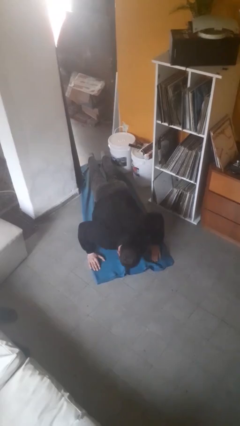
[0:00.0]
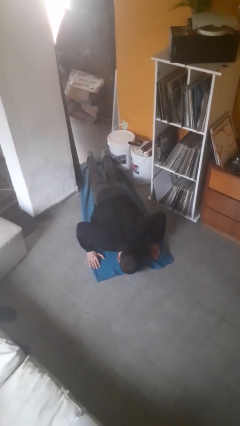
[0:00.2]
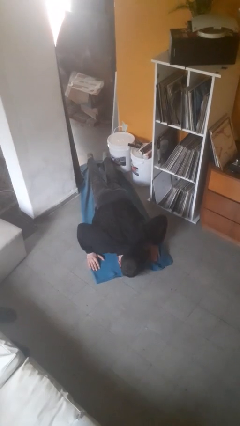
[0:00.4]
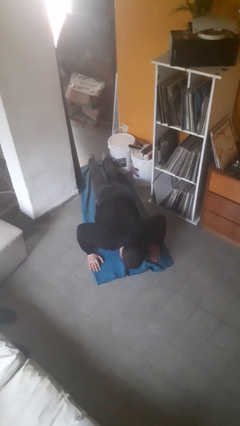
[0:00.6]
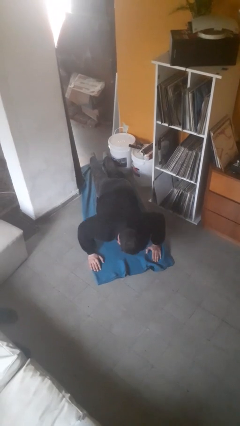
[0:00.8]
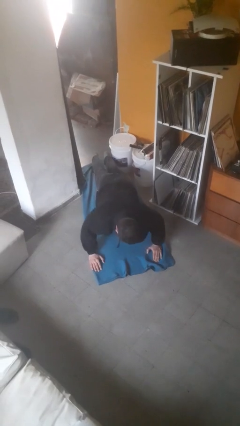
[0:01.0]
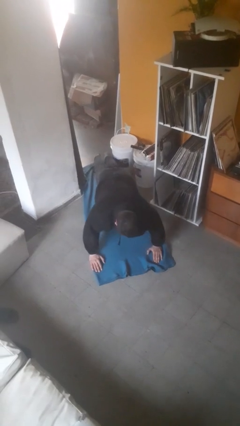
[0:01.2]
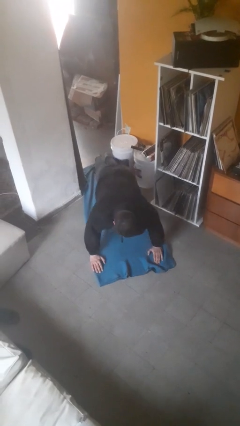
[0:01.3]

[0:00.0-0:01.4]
person exercises with pushup

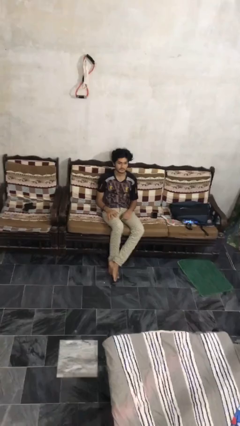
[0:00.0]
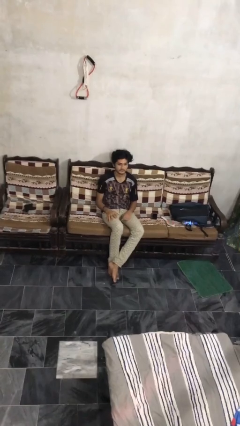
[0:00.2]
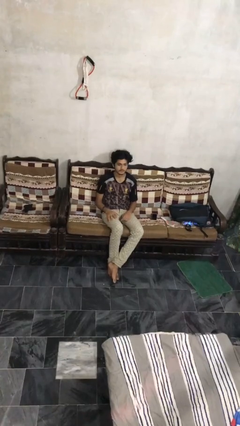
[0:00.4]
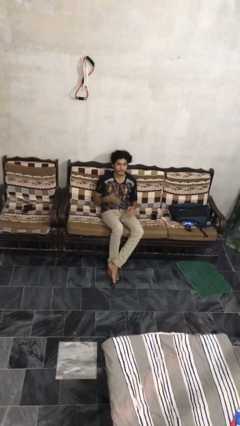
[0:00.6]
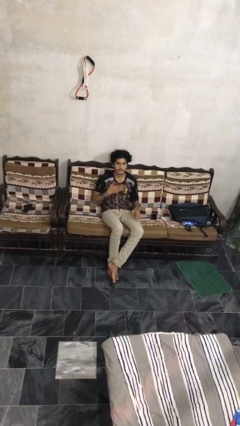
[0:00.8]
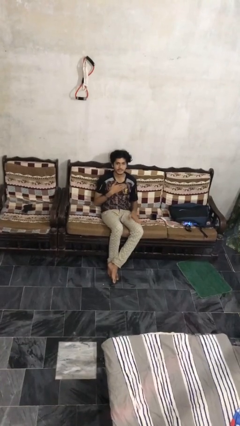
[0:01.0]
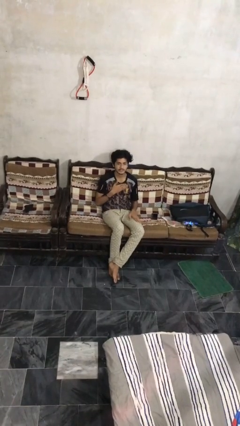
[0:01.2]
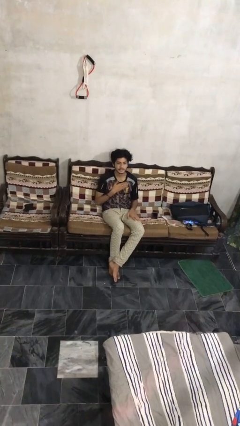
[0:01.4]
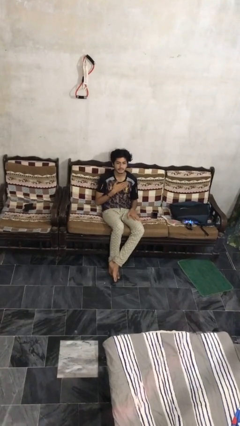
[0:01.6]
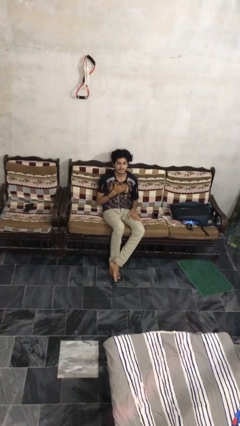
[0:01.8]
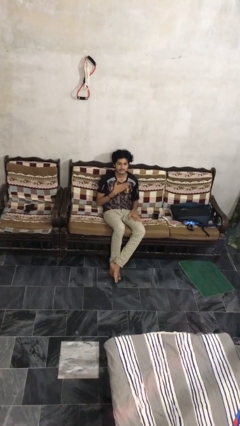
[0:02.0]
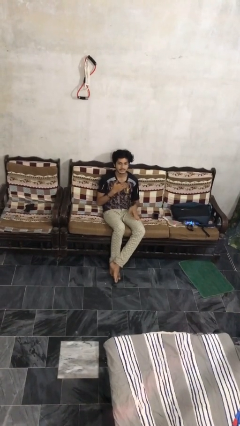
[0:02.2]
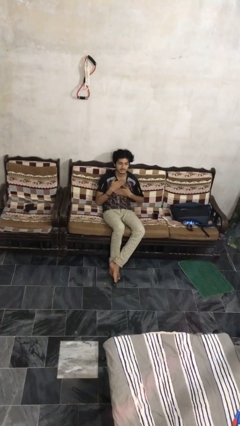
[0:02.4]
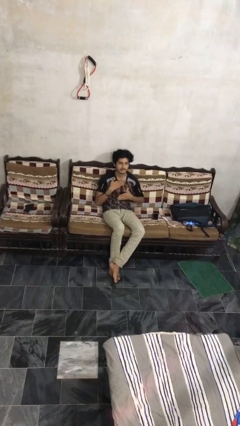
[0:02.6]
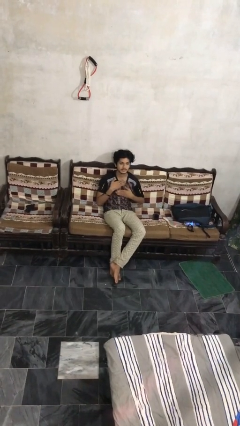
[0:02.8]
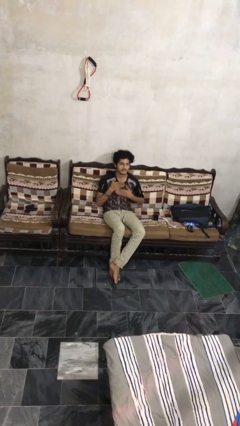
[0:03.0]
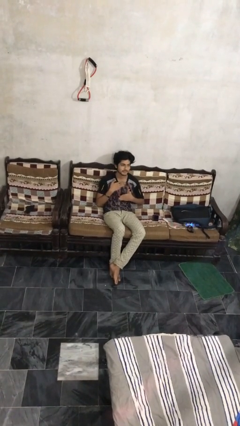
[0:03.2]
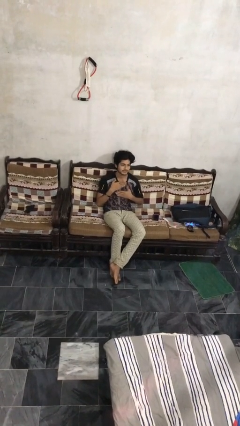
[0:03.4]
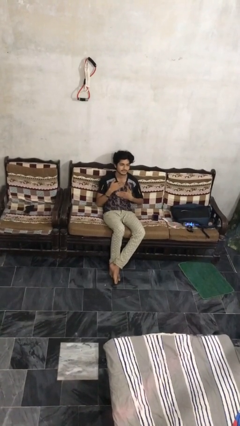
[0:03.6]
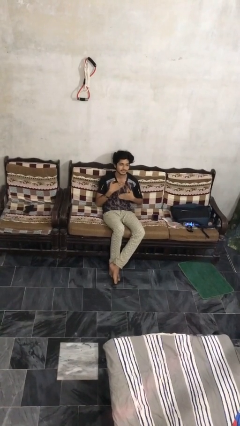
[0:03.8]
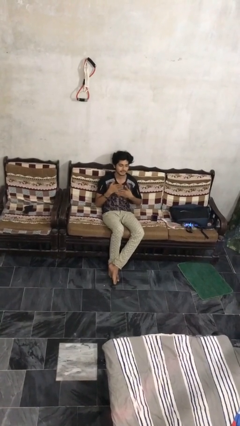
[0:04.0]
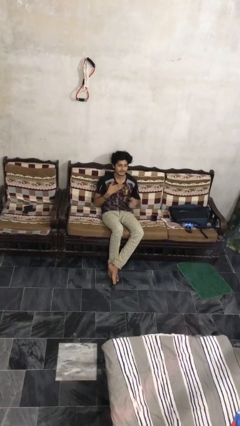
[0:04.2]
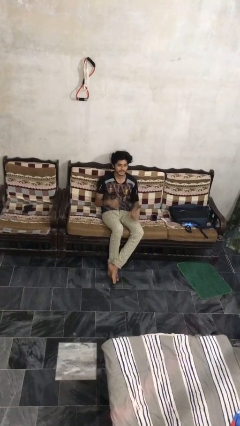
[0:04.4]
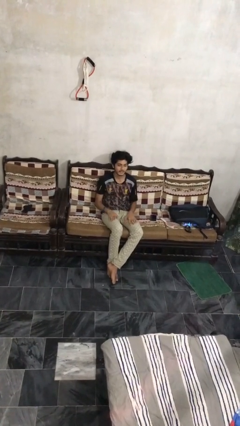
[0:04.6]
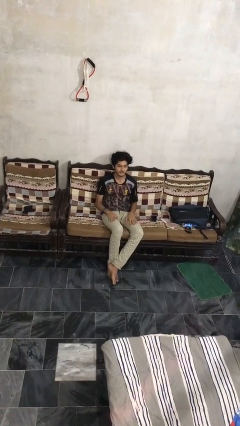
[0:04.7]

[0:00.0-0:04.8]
person drums on chest

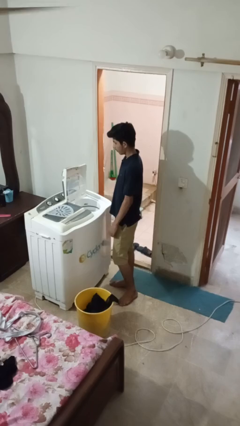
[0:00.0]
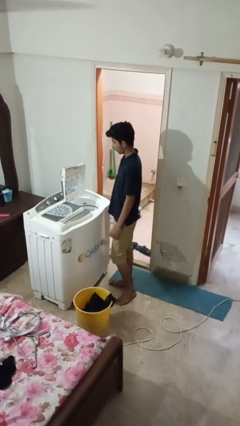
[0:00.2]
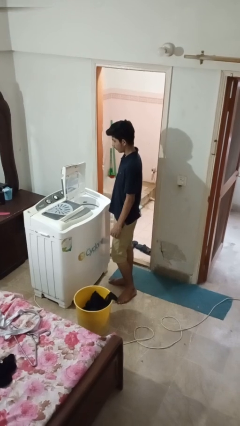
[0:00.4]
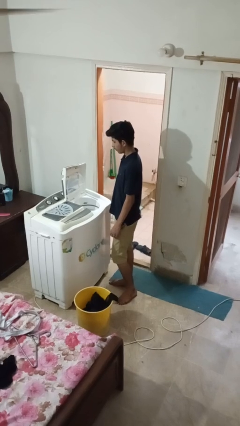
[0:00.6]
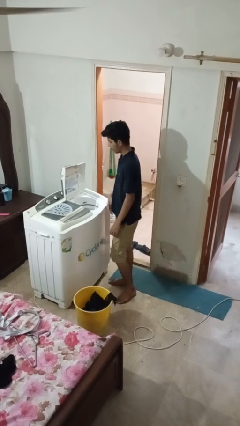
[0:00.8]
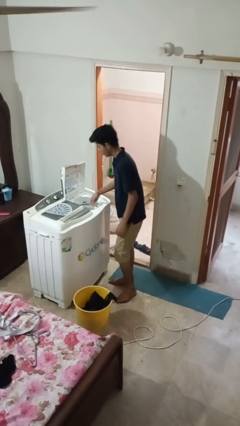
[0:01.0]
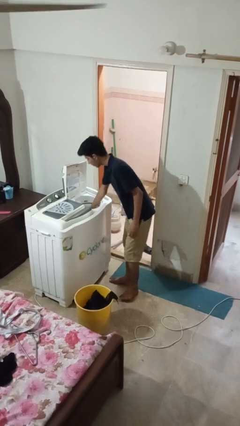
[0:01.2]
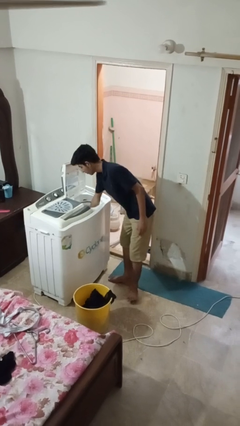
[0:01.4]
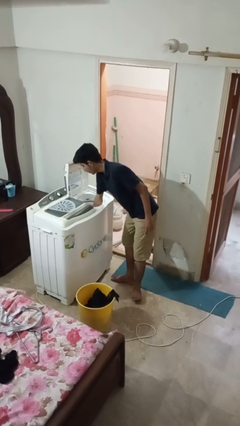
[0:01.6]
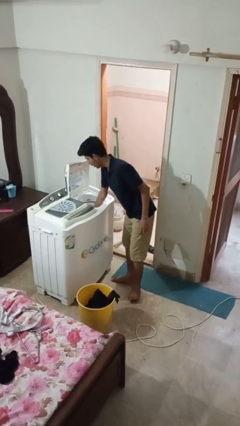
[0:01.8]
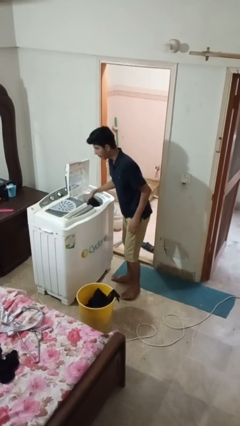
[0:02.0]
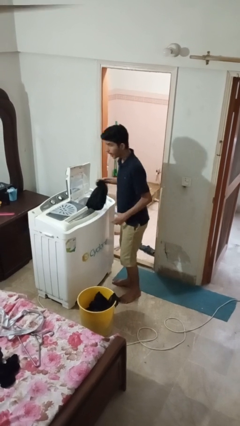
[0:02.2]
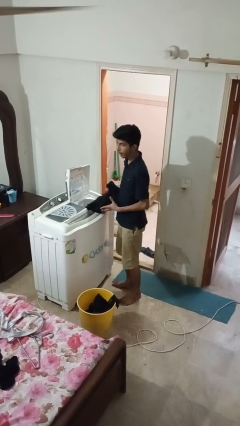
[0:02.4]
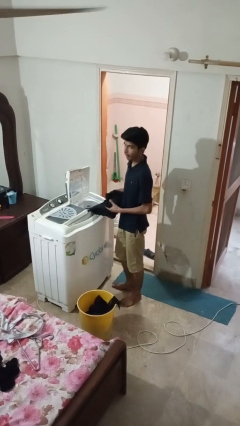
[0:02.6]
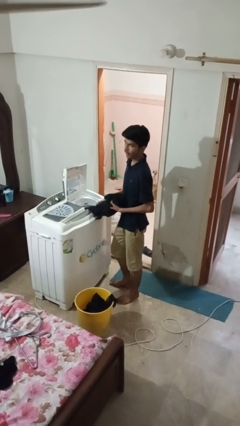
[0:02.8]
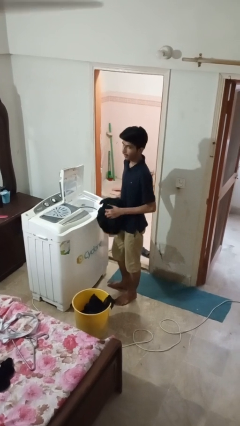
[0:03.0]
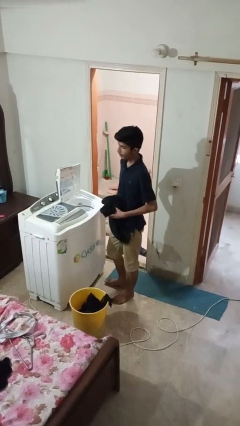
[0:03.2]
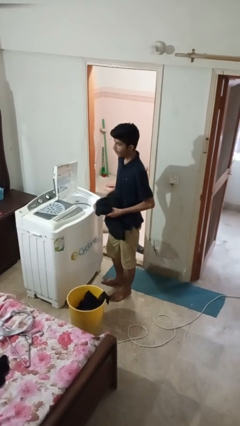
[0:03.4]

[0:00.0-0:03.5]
person unloads dryer

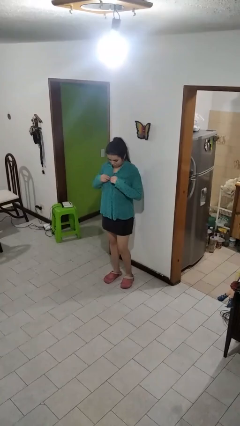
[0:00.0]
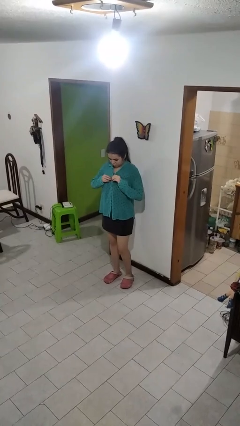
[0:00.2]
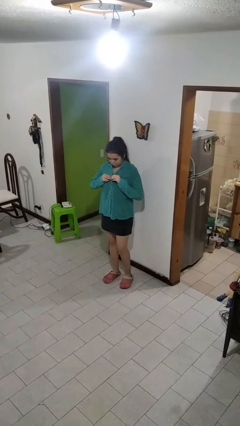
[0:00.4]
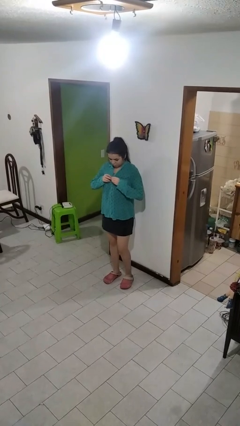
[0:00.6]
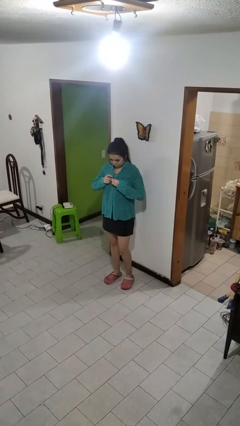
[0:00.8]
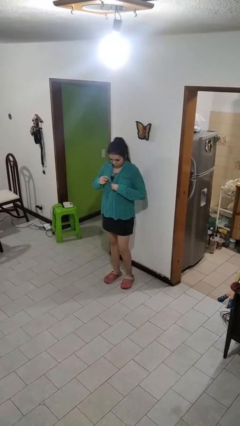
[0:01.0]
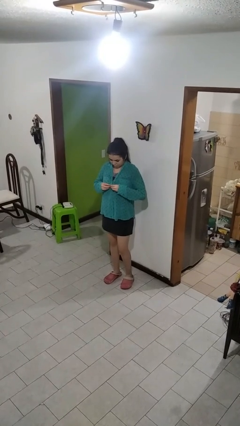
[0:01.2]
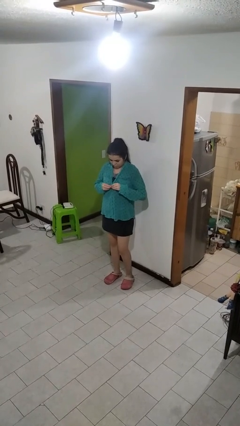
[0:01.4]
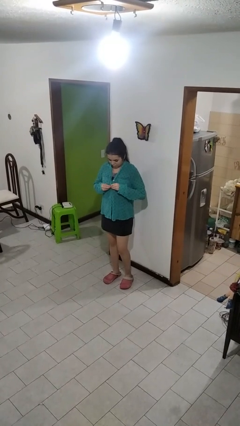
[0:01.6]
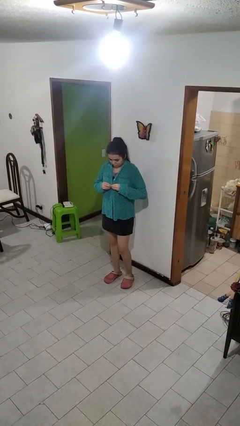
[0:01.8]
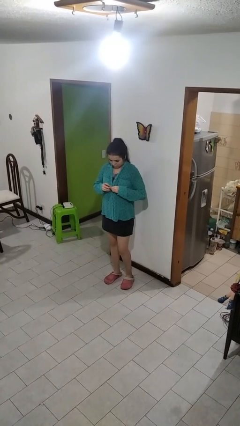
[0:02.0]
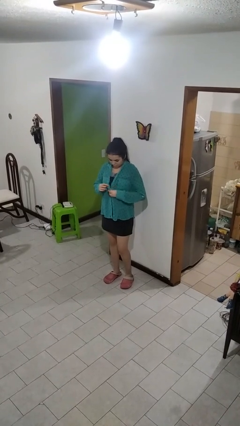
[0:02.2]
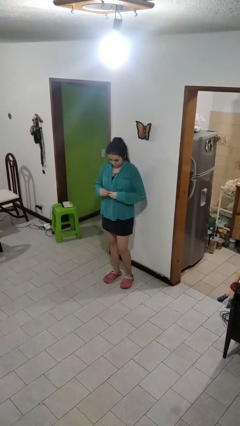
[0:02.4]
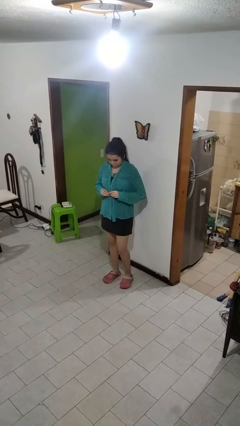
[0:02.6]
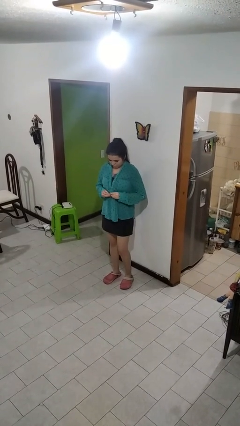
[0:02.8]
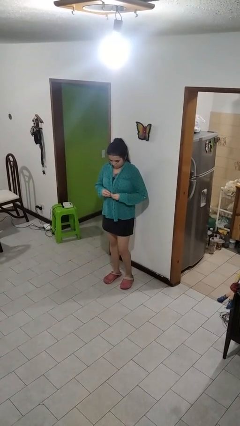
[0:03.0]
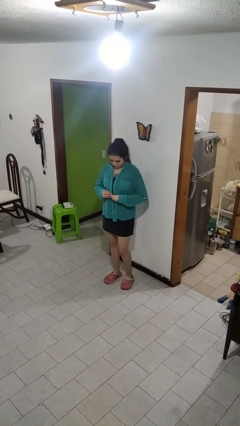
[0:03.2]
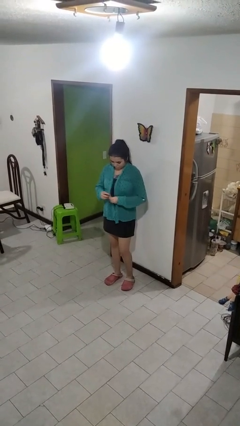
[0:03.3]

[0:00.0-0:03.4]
person unbuttons shirt

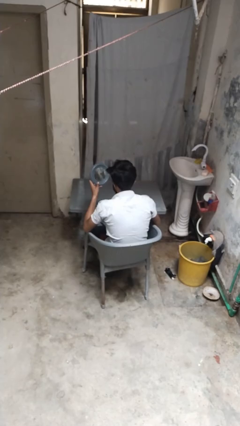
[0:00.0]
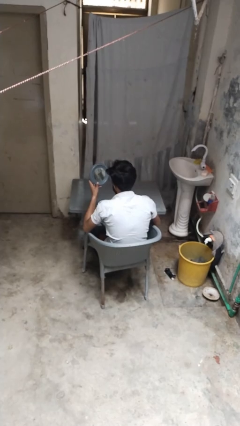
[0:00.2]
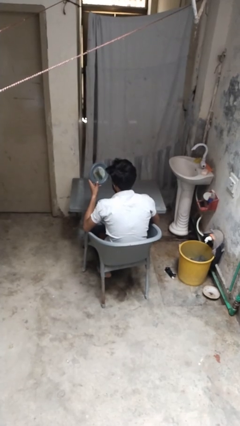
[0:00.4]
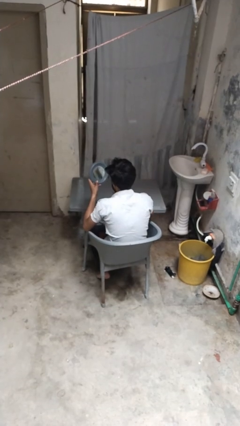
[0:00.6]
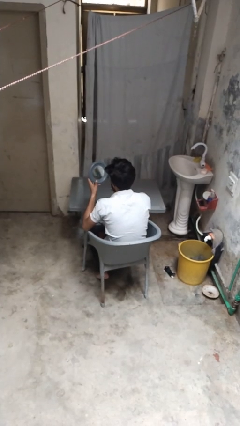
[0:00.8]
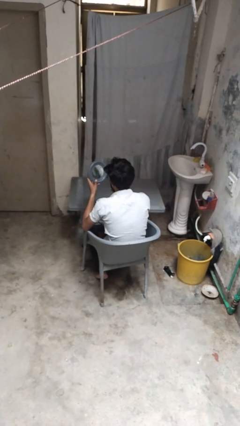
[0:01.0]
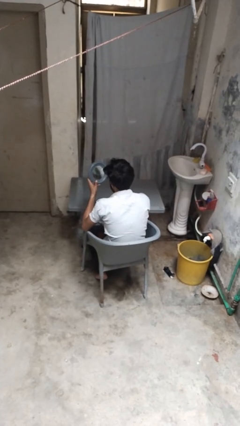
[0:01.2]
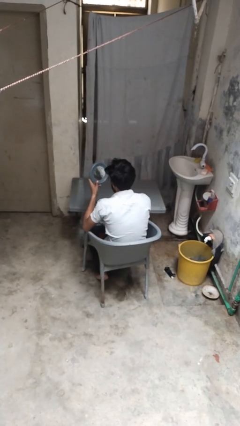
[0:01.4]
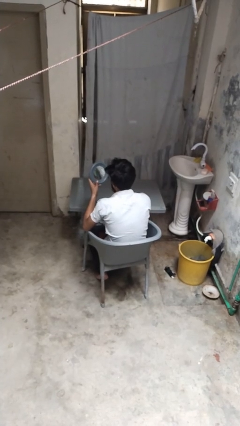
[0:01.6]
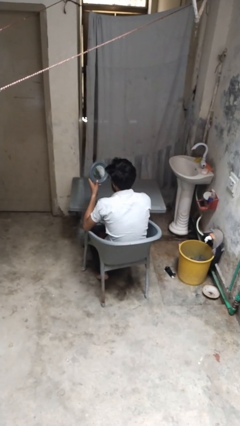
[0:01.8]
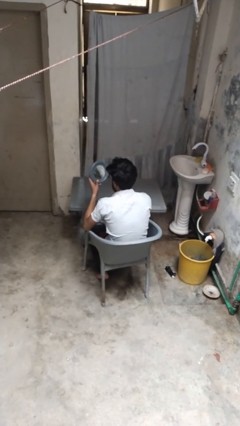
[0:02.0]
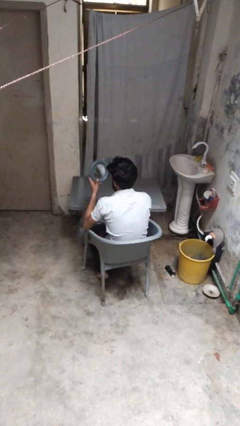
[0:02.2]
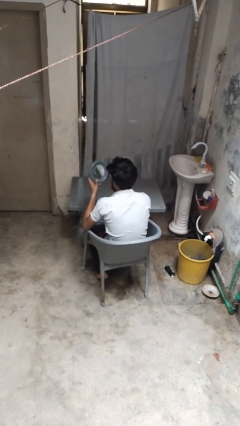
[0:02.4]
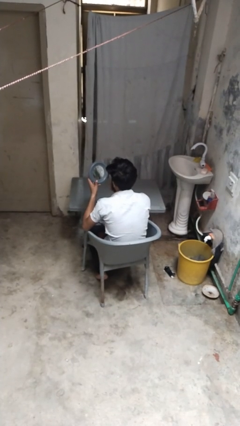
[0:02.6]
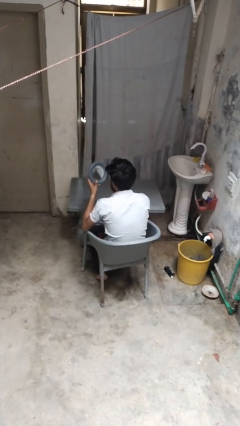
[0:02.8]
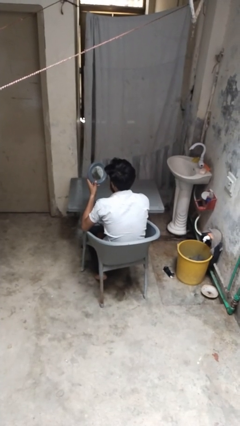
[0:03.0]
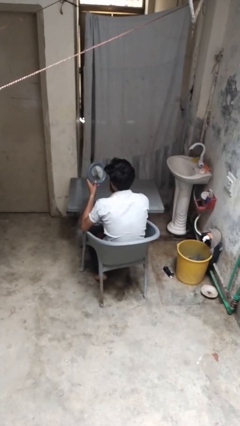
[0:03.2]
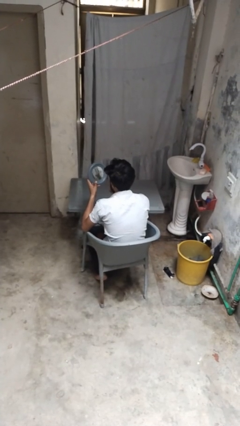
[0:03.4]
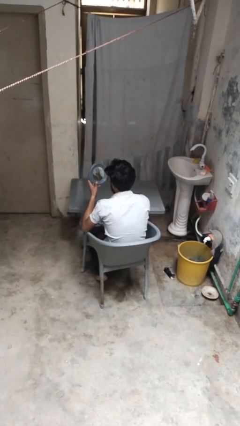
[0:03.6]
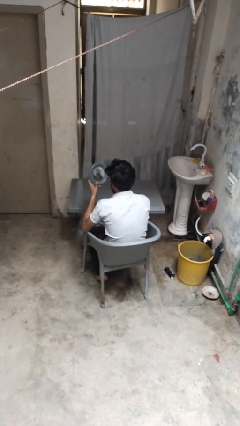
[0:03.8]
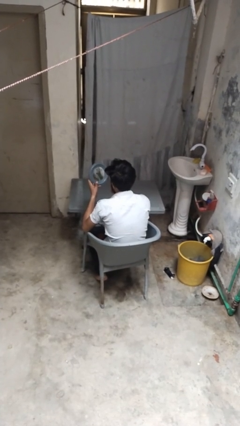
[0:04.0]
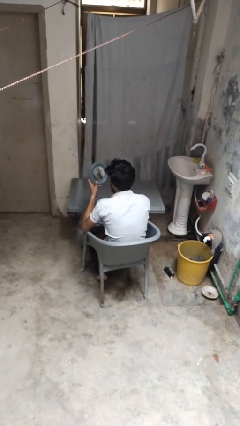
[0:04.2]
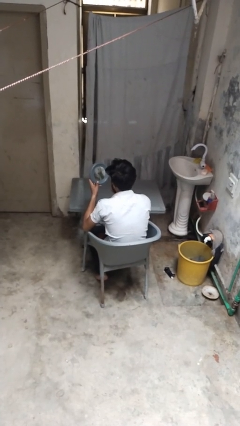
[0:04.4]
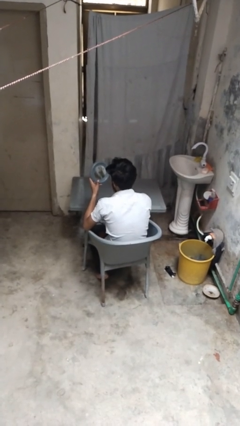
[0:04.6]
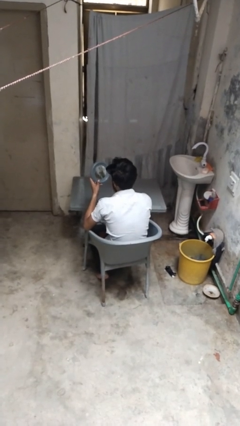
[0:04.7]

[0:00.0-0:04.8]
person applies lip makeup
